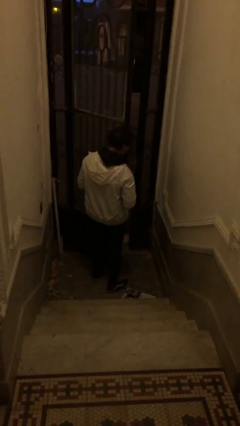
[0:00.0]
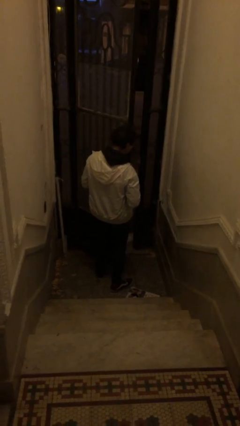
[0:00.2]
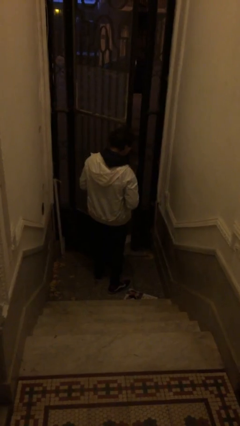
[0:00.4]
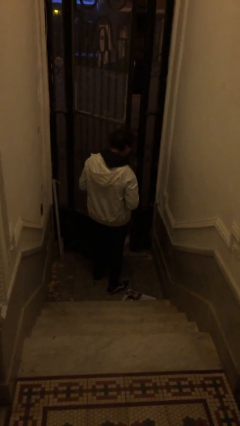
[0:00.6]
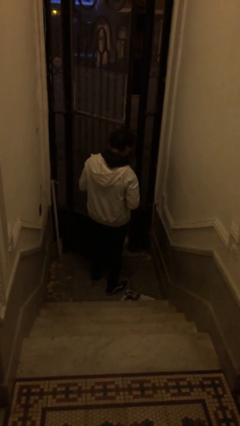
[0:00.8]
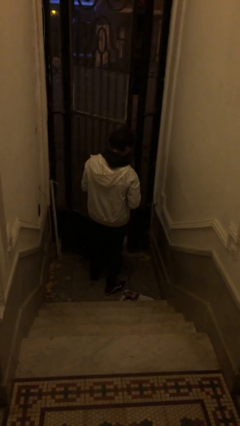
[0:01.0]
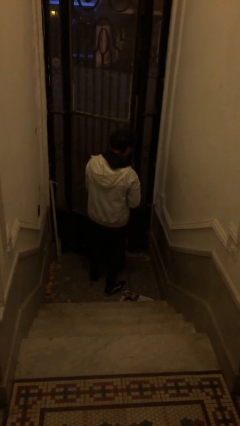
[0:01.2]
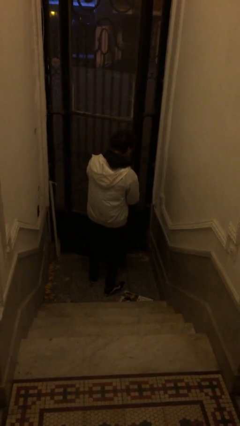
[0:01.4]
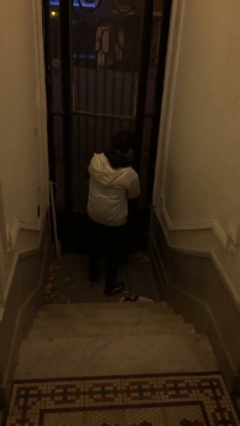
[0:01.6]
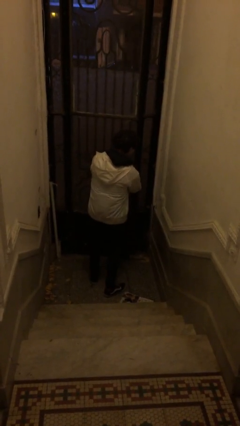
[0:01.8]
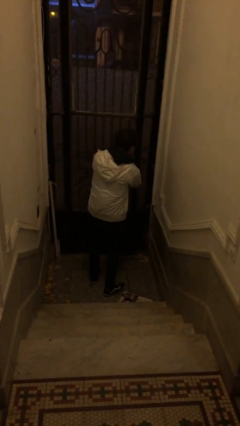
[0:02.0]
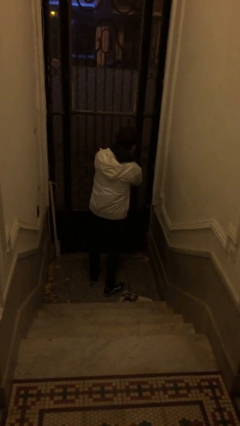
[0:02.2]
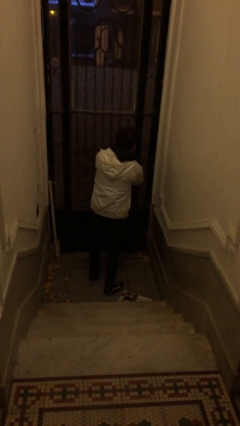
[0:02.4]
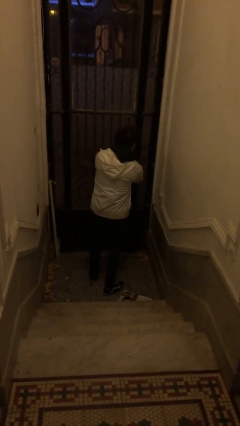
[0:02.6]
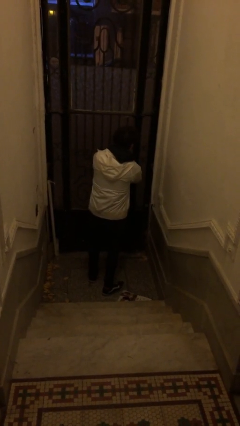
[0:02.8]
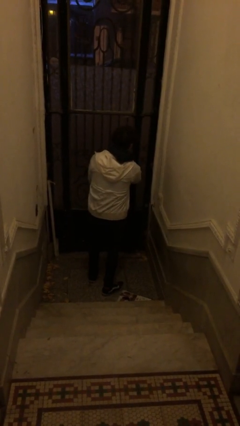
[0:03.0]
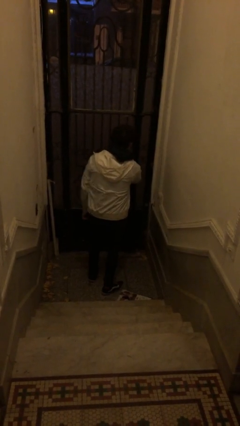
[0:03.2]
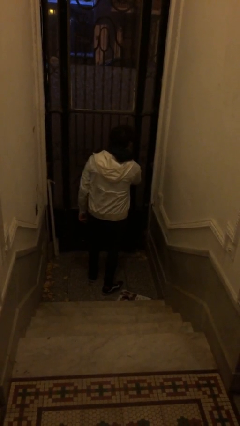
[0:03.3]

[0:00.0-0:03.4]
person closes facility door

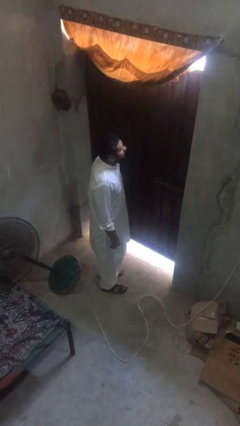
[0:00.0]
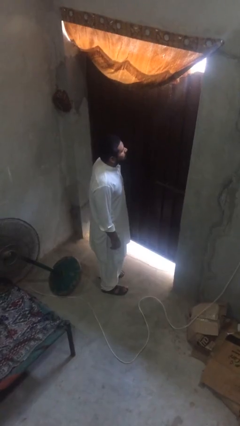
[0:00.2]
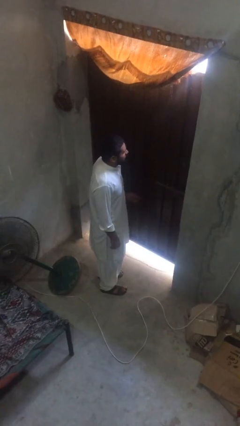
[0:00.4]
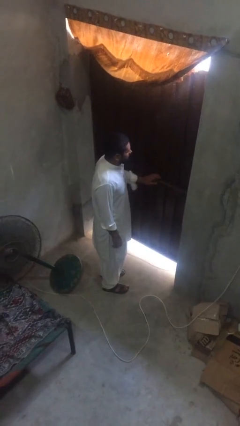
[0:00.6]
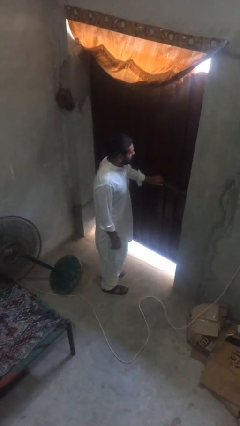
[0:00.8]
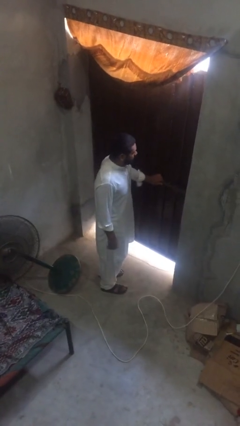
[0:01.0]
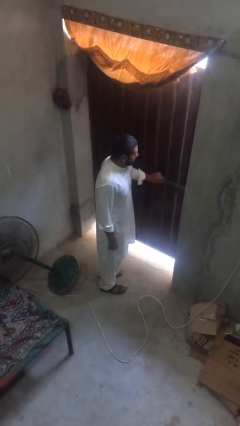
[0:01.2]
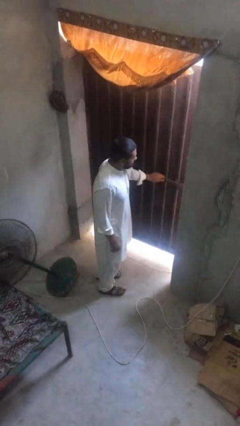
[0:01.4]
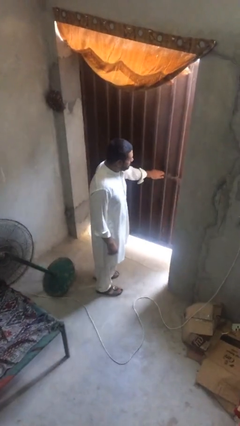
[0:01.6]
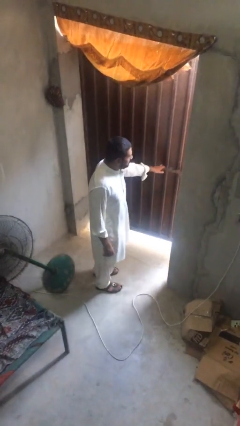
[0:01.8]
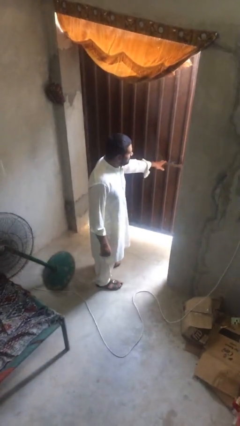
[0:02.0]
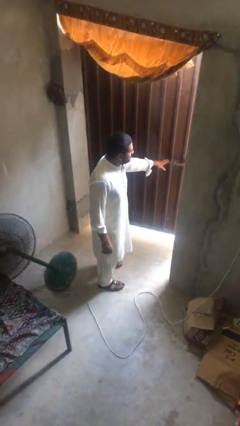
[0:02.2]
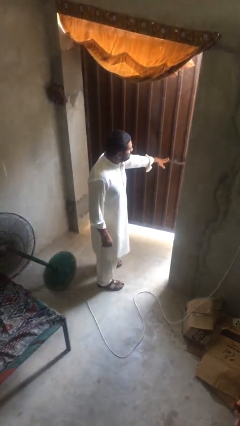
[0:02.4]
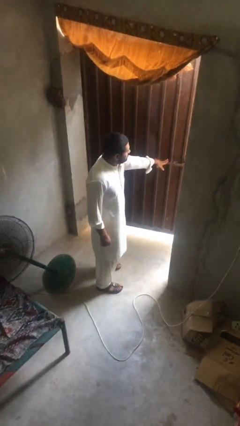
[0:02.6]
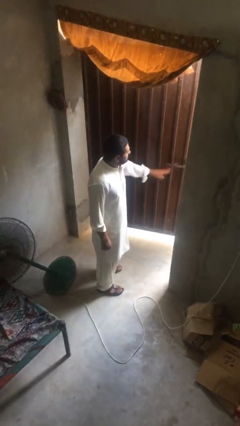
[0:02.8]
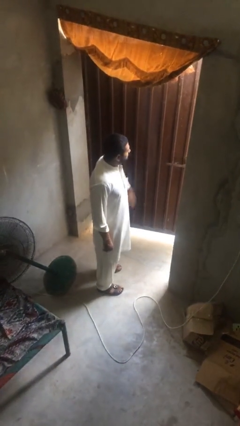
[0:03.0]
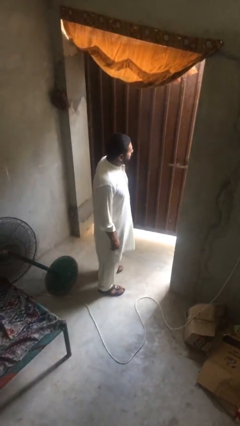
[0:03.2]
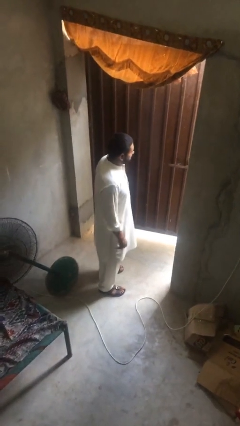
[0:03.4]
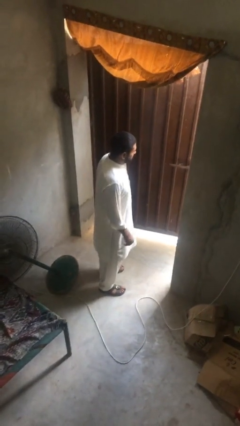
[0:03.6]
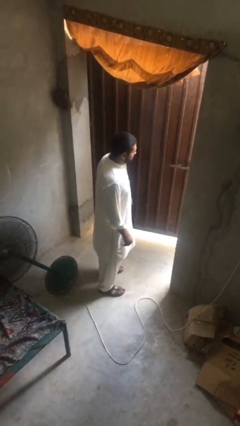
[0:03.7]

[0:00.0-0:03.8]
person opens facility door

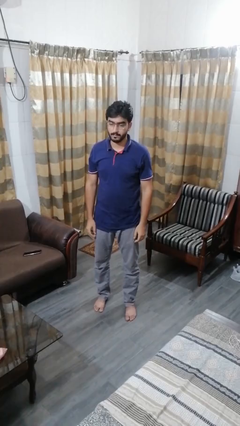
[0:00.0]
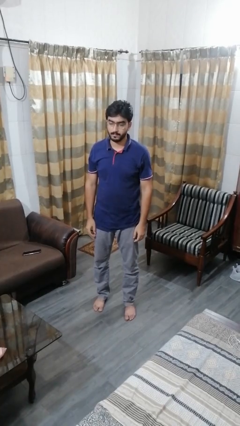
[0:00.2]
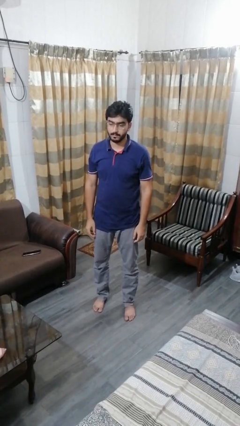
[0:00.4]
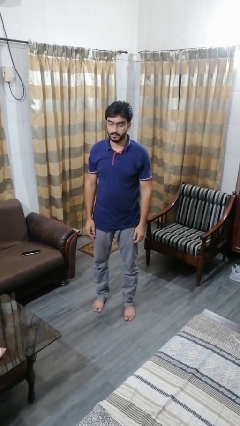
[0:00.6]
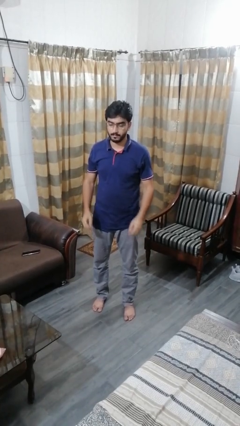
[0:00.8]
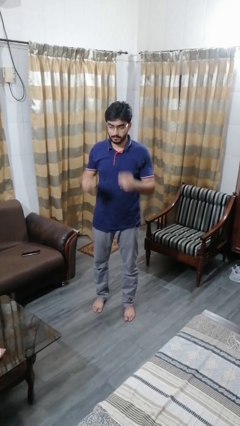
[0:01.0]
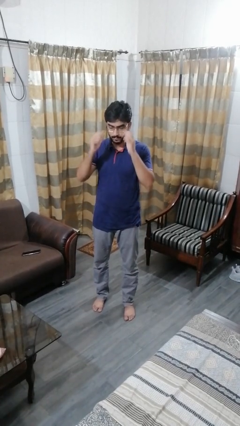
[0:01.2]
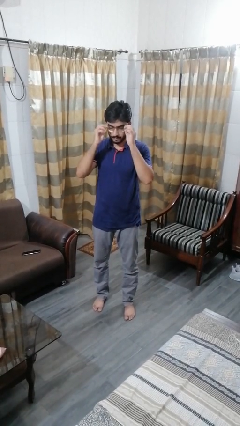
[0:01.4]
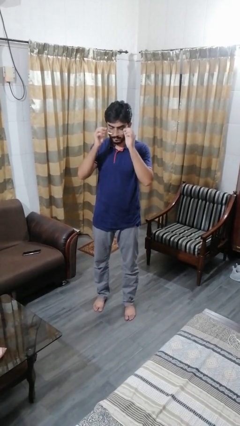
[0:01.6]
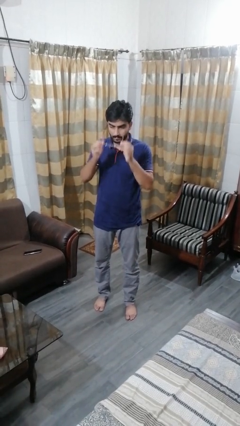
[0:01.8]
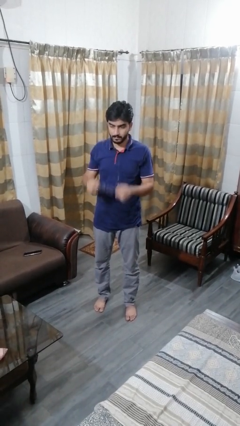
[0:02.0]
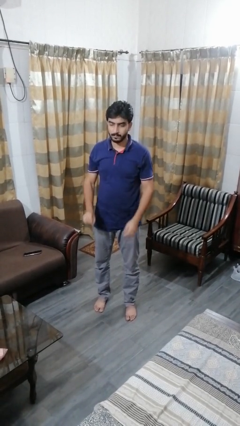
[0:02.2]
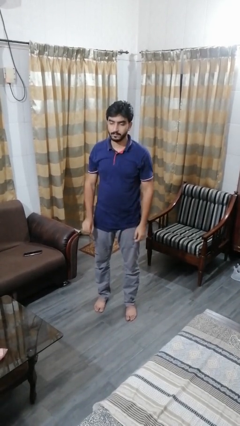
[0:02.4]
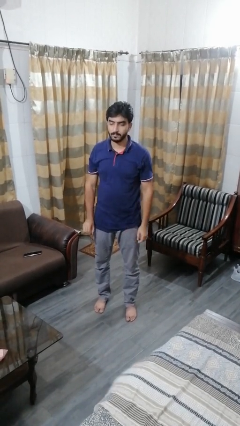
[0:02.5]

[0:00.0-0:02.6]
person takes off glasses

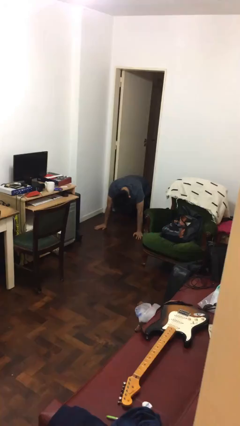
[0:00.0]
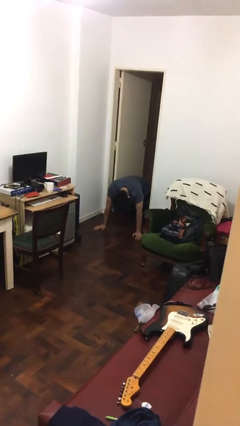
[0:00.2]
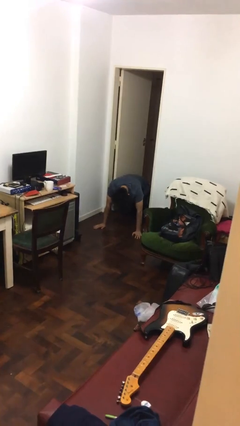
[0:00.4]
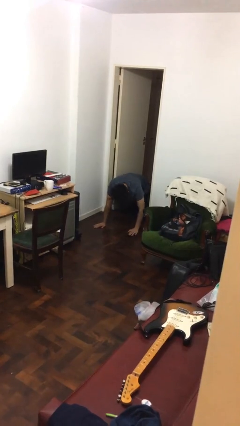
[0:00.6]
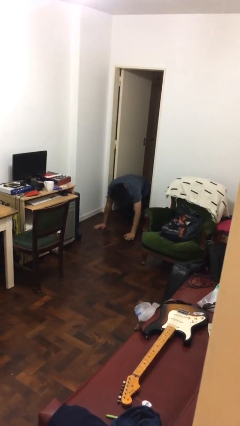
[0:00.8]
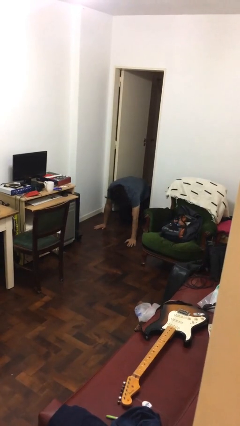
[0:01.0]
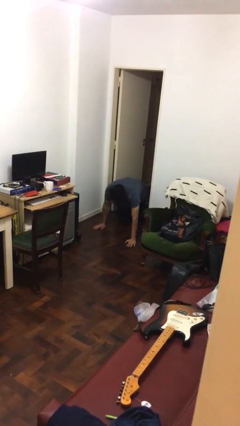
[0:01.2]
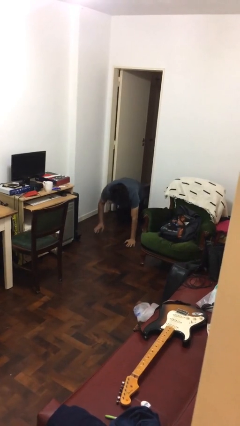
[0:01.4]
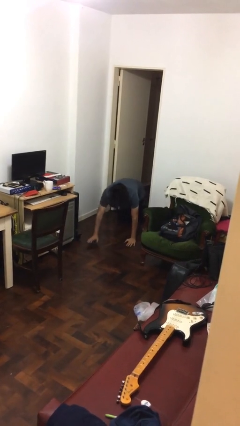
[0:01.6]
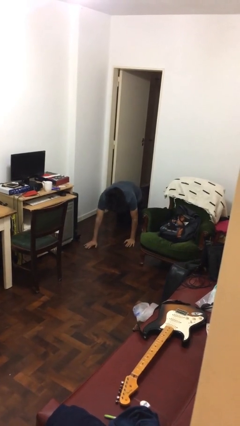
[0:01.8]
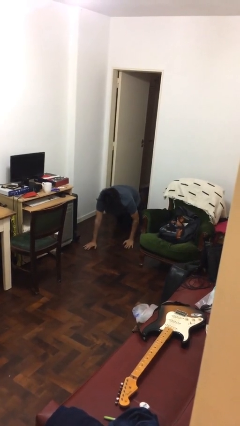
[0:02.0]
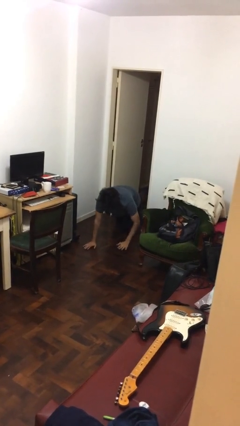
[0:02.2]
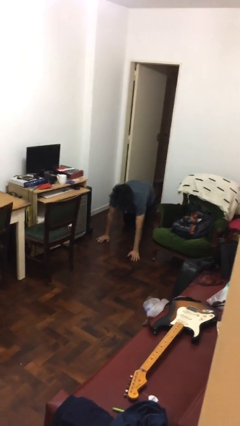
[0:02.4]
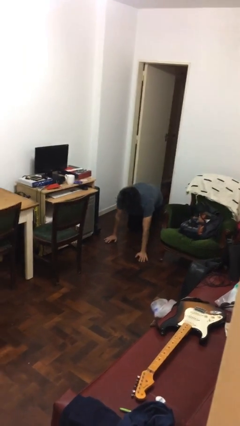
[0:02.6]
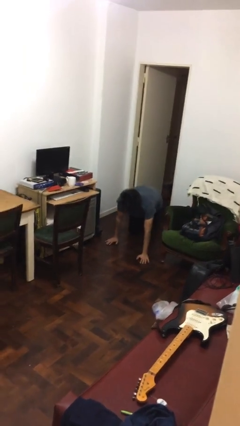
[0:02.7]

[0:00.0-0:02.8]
person crawls

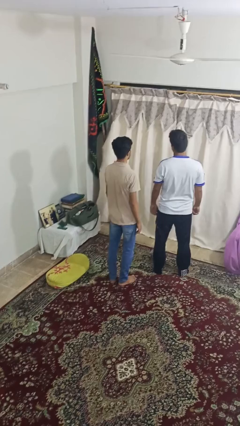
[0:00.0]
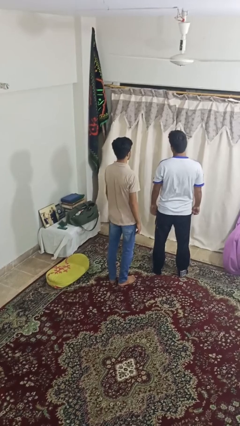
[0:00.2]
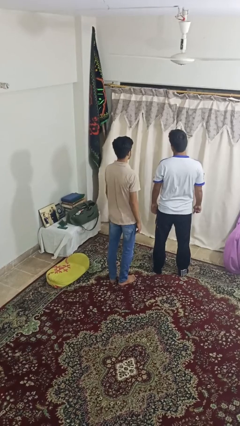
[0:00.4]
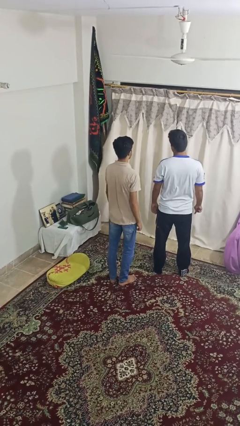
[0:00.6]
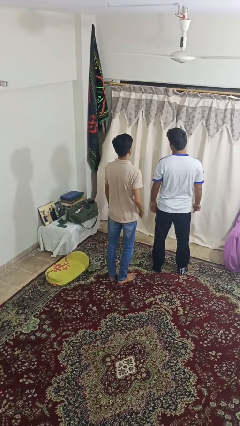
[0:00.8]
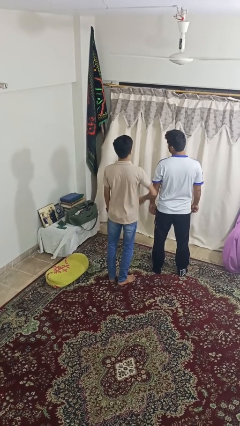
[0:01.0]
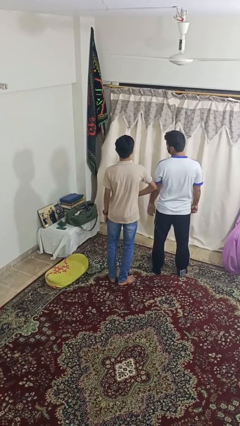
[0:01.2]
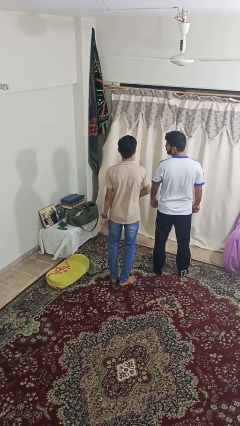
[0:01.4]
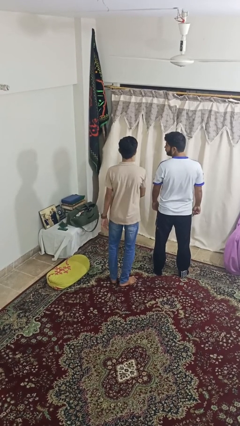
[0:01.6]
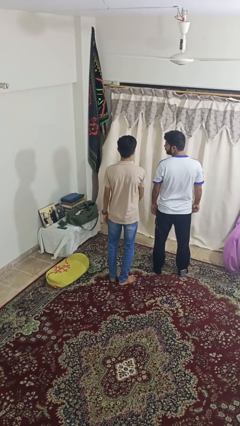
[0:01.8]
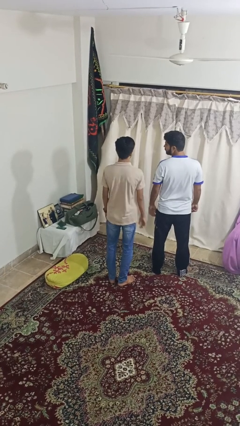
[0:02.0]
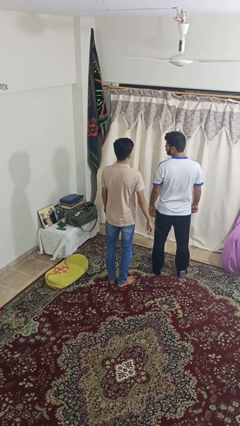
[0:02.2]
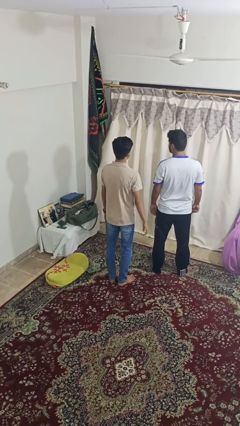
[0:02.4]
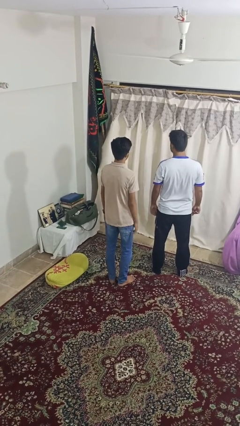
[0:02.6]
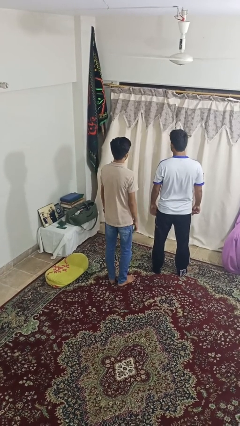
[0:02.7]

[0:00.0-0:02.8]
person nudges person with elbow

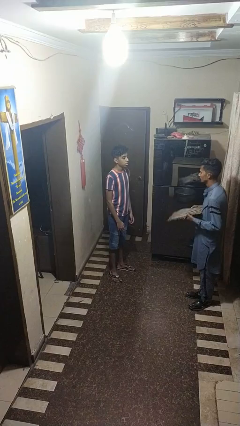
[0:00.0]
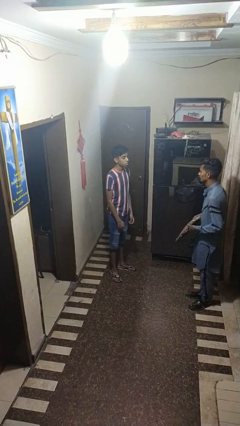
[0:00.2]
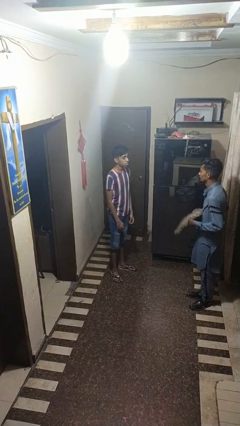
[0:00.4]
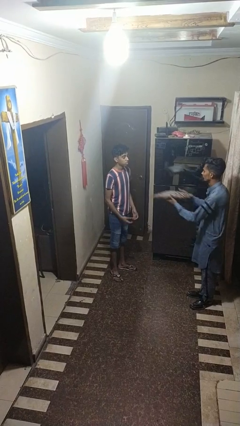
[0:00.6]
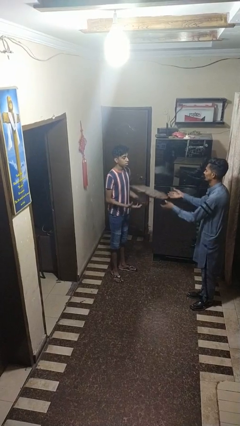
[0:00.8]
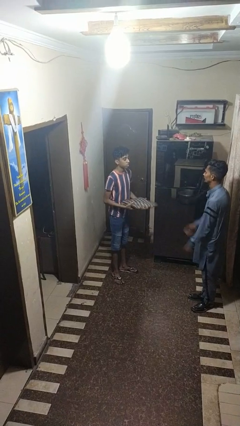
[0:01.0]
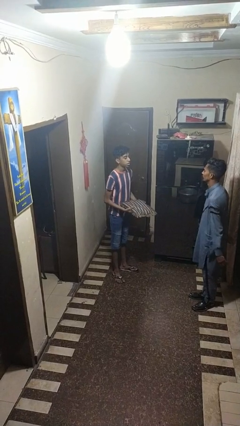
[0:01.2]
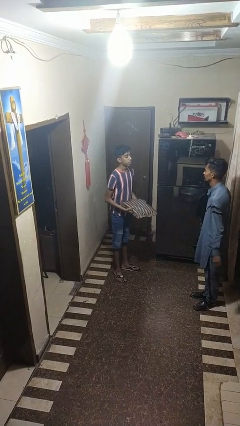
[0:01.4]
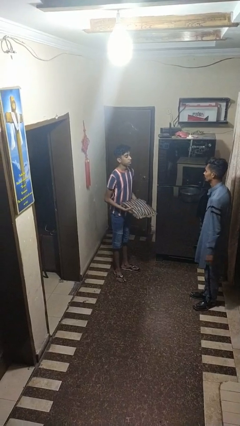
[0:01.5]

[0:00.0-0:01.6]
person catches object from person
